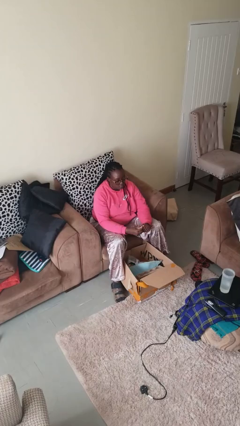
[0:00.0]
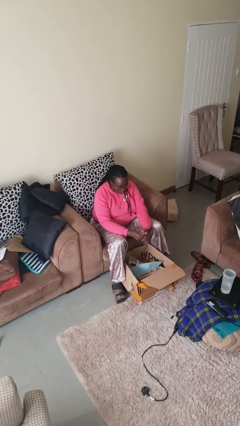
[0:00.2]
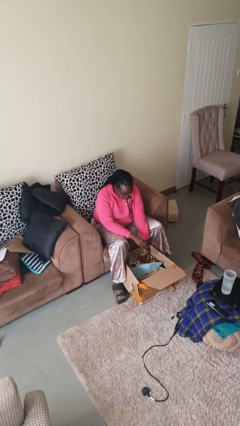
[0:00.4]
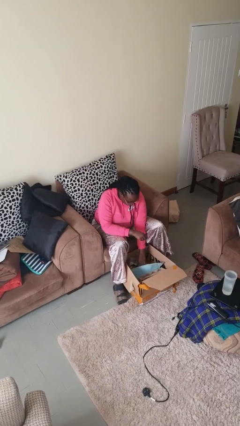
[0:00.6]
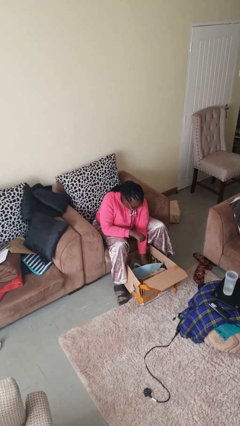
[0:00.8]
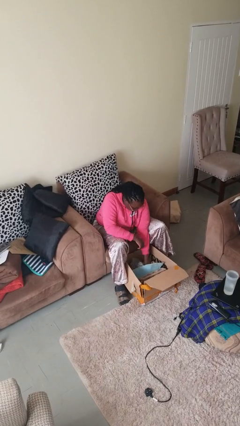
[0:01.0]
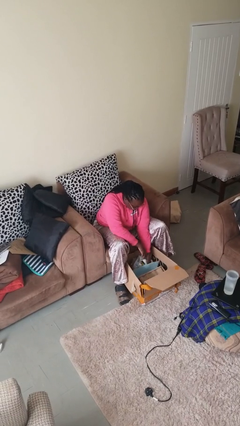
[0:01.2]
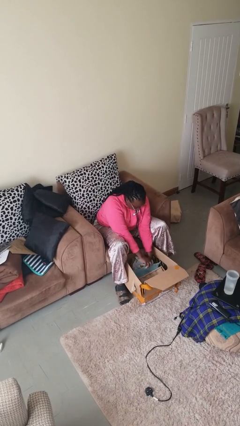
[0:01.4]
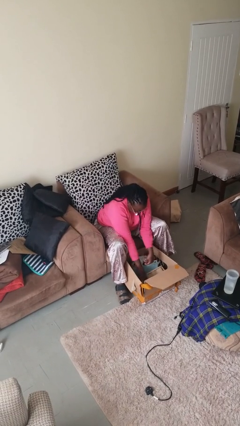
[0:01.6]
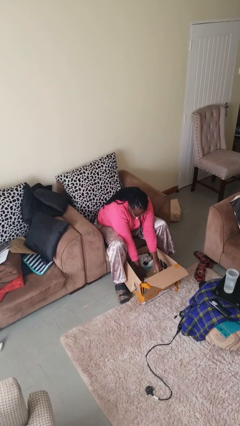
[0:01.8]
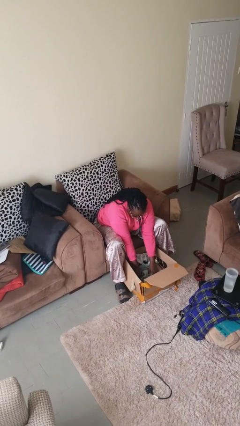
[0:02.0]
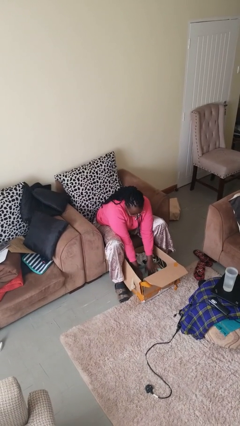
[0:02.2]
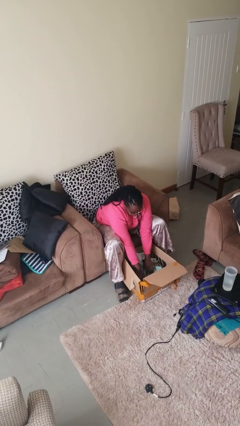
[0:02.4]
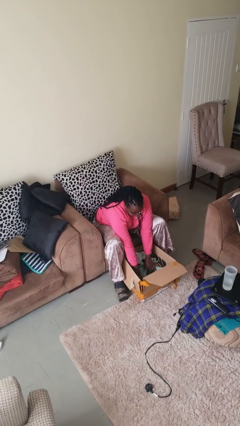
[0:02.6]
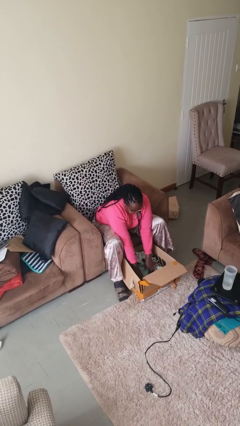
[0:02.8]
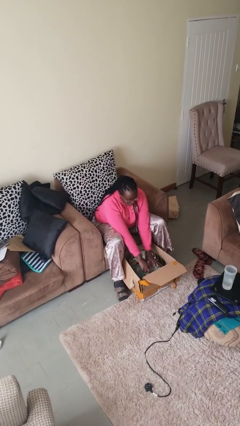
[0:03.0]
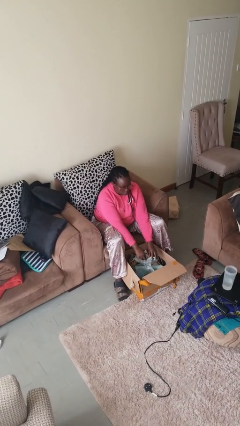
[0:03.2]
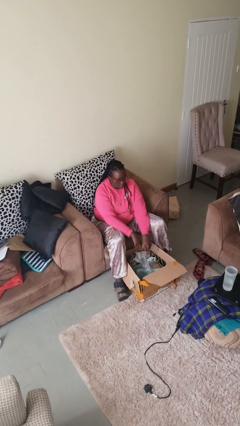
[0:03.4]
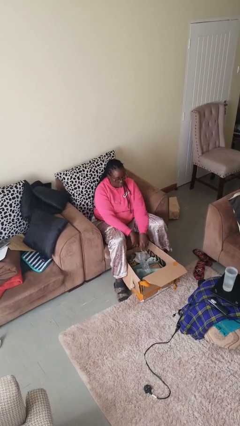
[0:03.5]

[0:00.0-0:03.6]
person searches in box

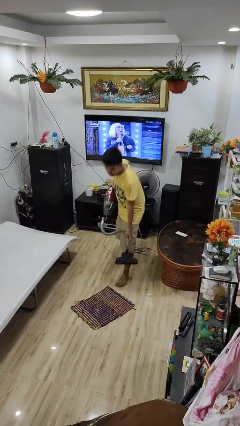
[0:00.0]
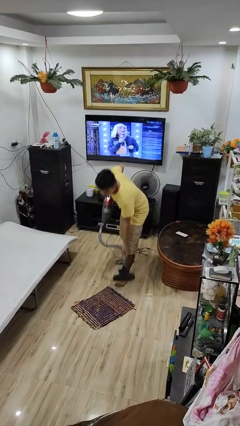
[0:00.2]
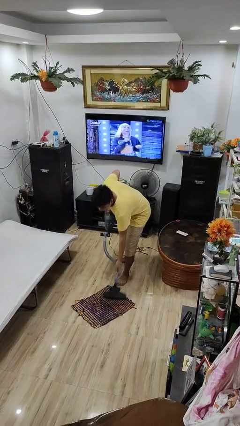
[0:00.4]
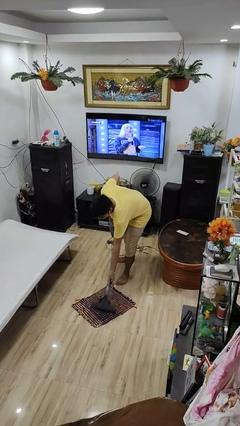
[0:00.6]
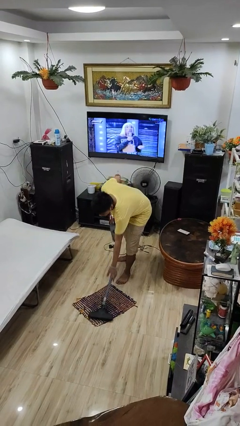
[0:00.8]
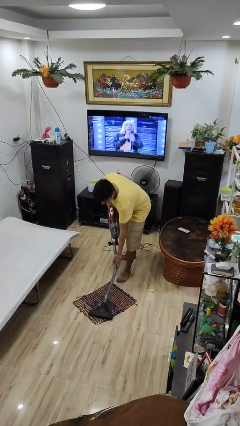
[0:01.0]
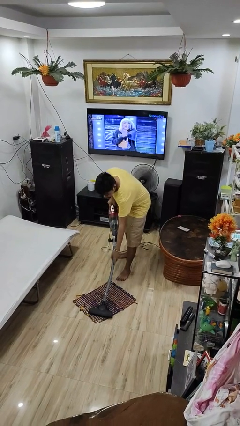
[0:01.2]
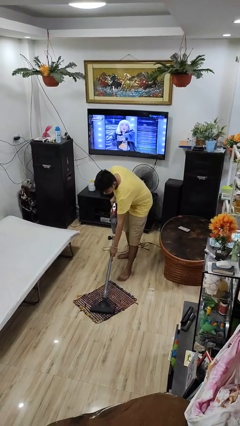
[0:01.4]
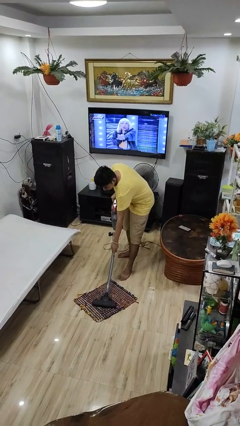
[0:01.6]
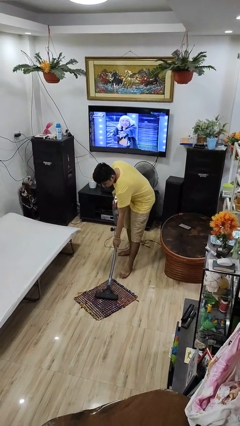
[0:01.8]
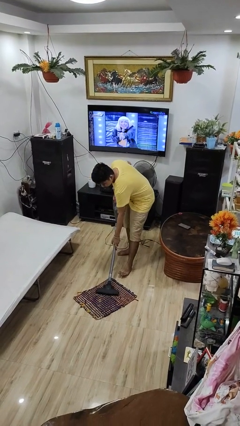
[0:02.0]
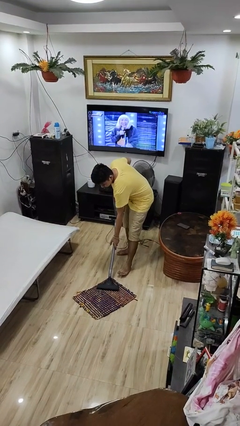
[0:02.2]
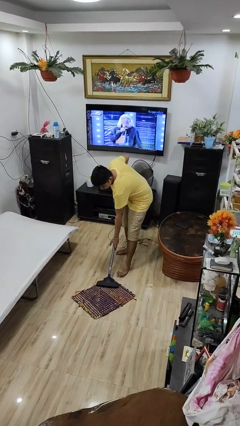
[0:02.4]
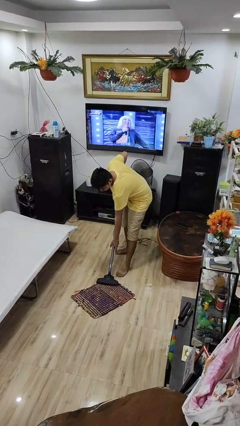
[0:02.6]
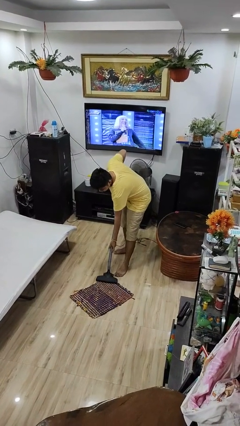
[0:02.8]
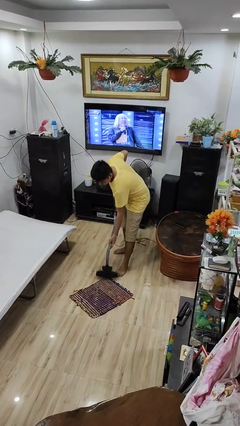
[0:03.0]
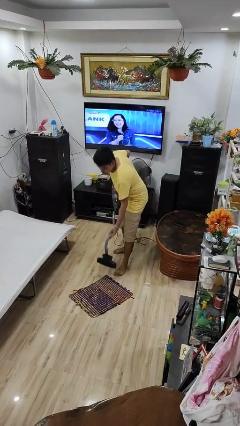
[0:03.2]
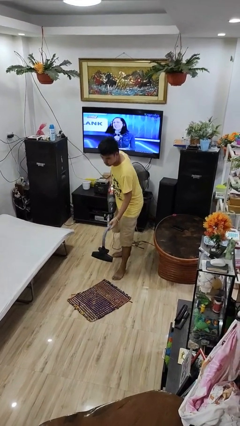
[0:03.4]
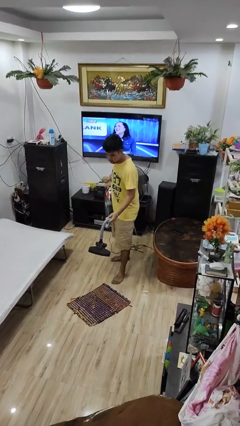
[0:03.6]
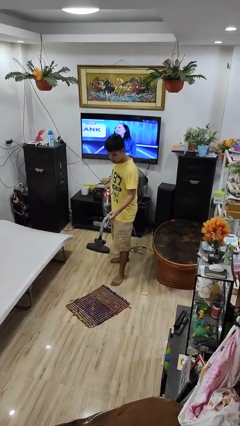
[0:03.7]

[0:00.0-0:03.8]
person vacuums carpet

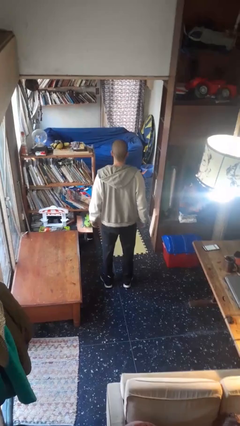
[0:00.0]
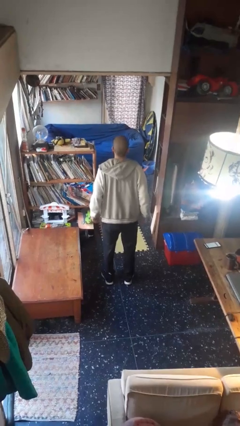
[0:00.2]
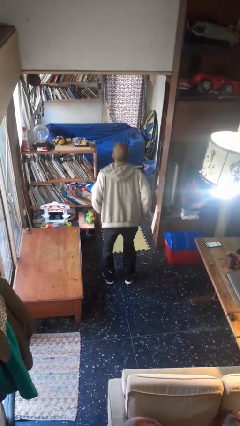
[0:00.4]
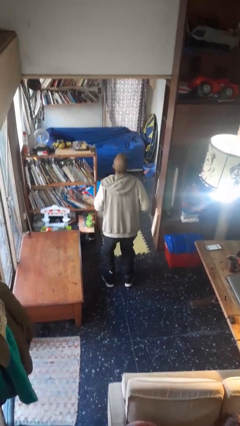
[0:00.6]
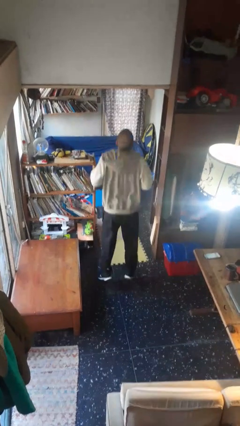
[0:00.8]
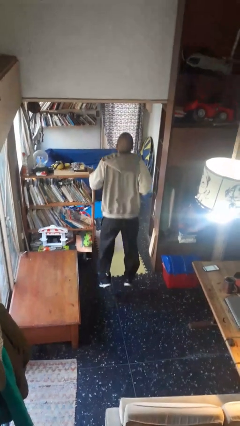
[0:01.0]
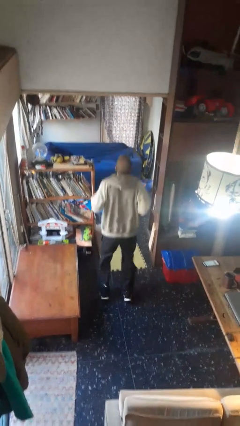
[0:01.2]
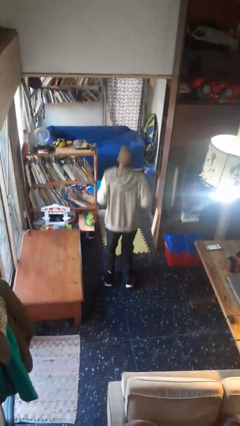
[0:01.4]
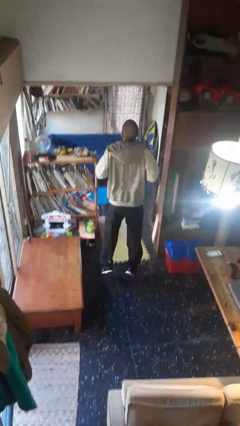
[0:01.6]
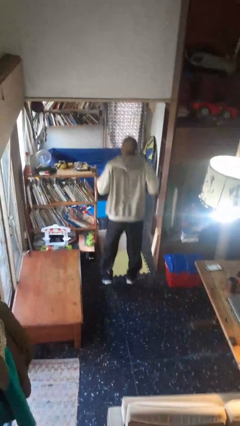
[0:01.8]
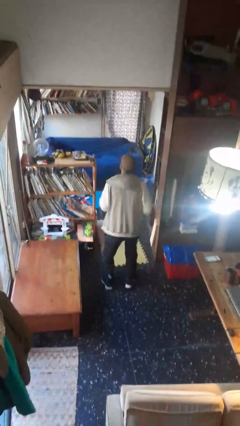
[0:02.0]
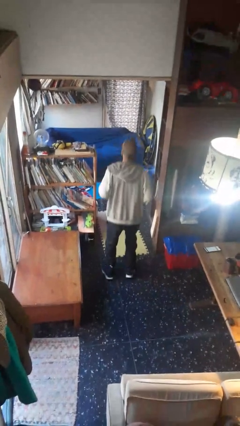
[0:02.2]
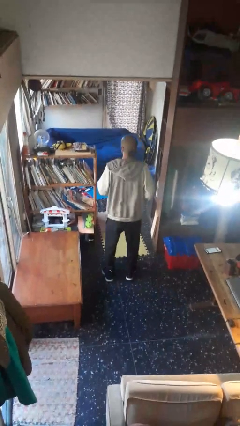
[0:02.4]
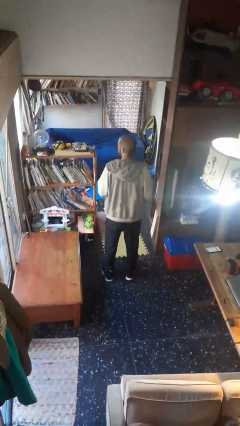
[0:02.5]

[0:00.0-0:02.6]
person jumps

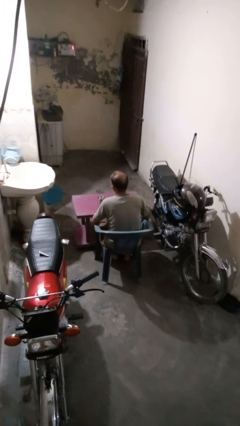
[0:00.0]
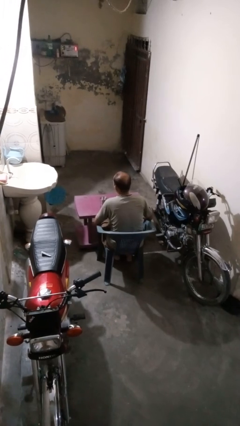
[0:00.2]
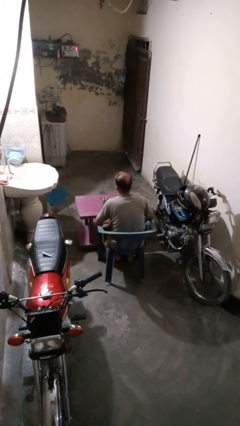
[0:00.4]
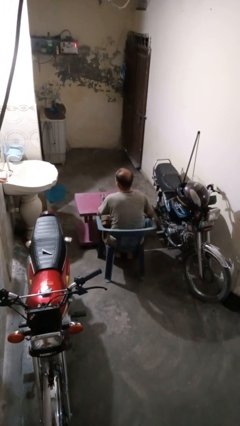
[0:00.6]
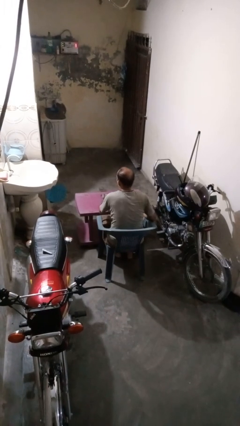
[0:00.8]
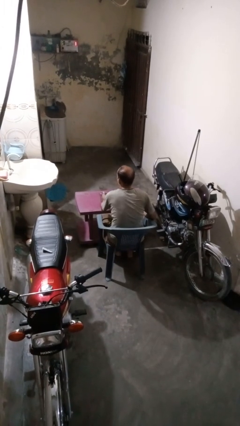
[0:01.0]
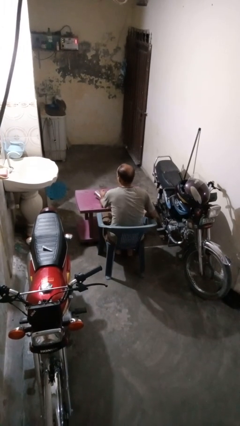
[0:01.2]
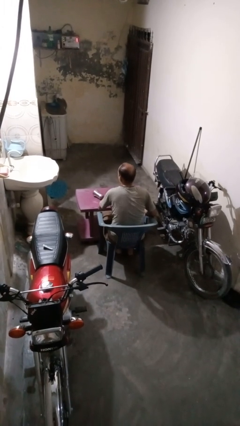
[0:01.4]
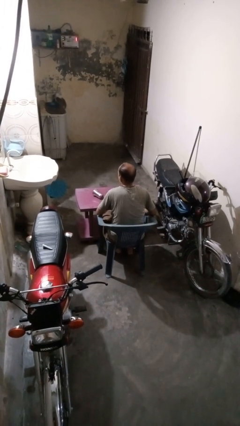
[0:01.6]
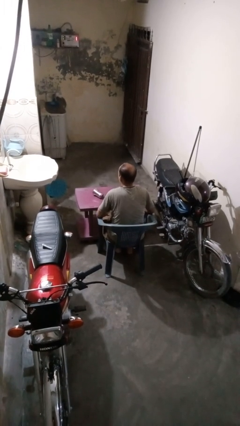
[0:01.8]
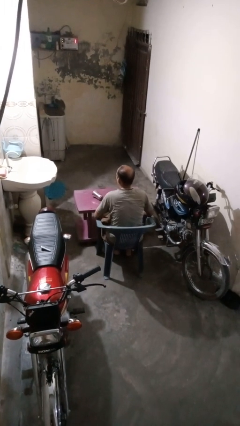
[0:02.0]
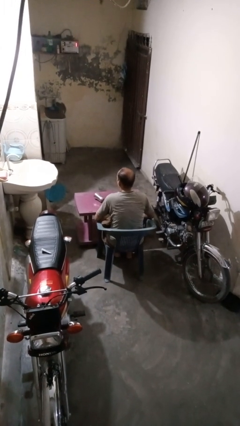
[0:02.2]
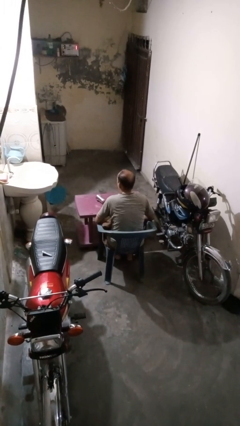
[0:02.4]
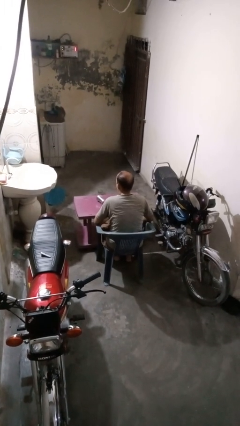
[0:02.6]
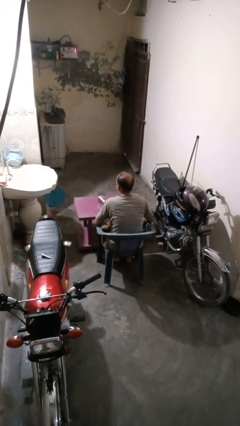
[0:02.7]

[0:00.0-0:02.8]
person knocks over glass

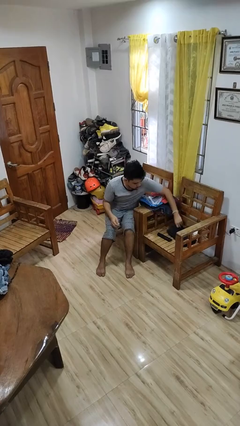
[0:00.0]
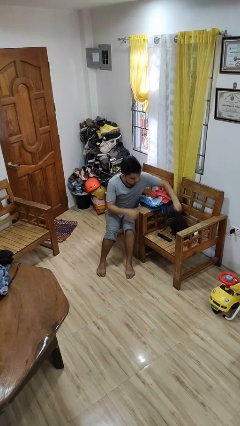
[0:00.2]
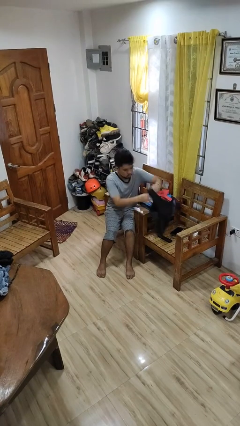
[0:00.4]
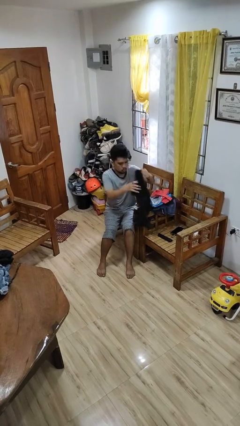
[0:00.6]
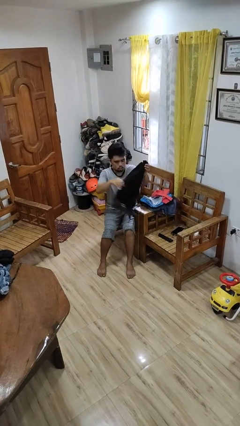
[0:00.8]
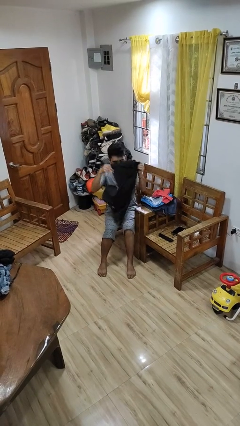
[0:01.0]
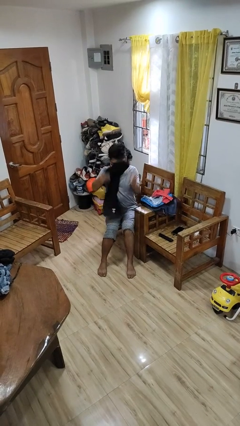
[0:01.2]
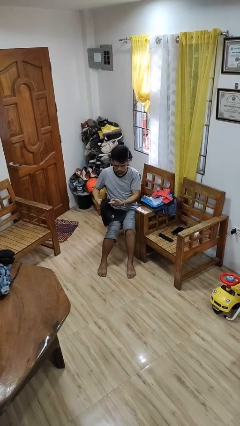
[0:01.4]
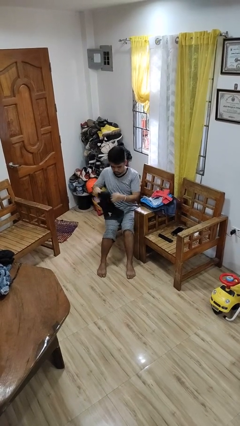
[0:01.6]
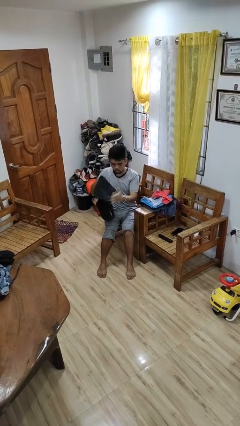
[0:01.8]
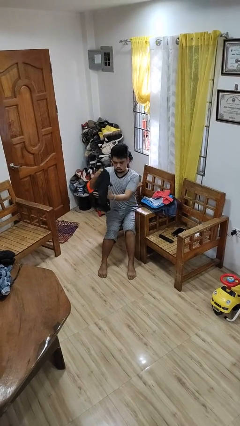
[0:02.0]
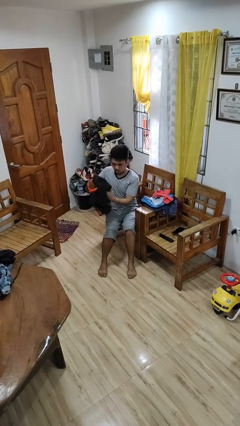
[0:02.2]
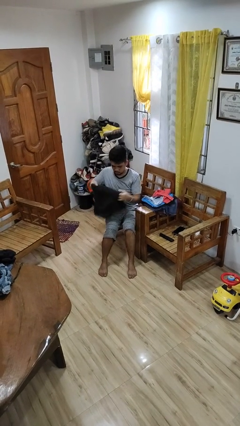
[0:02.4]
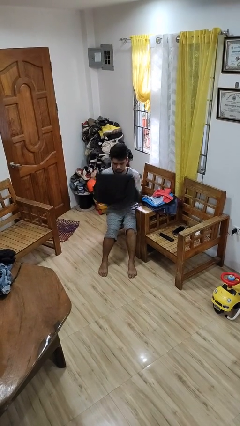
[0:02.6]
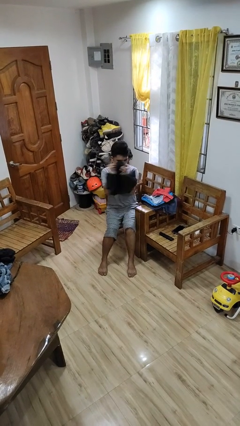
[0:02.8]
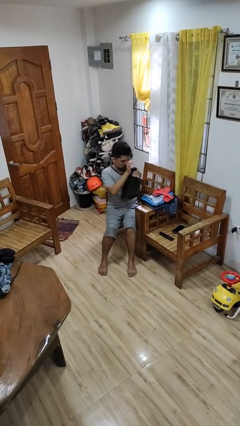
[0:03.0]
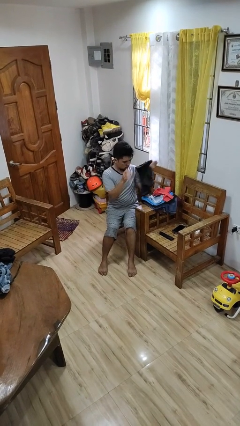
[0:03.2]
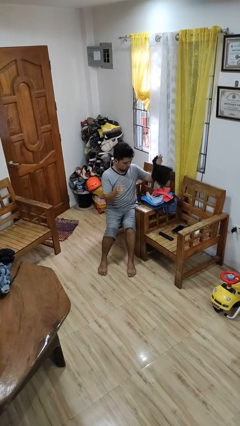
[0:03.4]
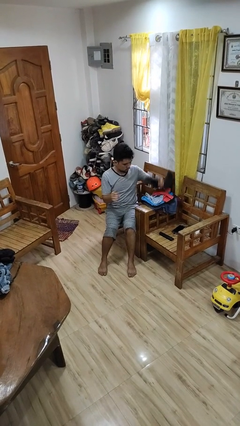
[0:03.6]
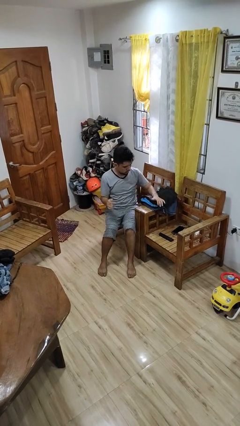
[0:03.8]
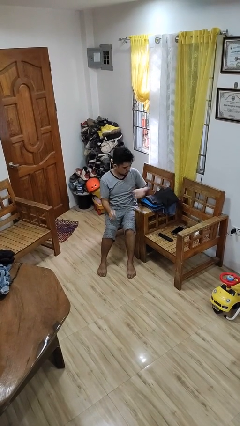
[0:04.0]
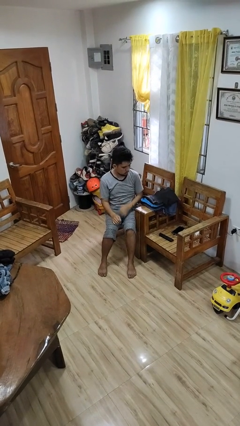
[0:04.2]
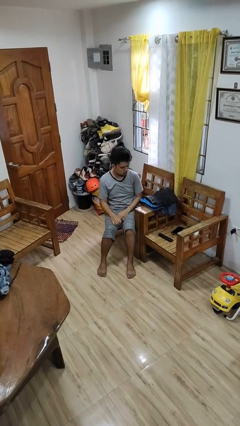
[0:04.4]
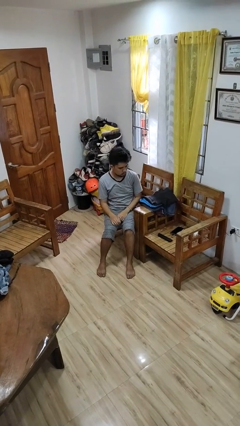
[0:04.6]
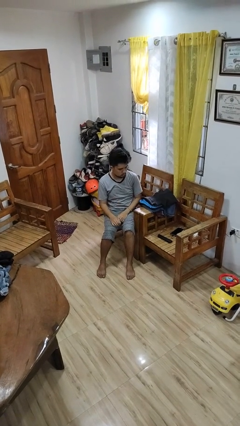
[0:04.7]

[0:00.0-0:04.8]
person folds shirt
